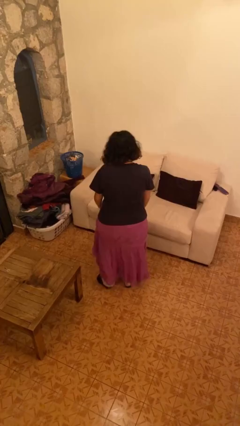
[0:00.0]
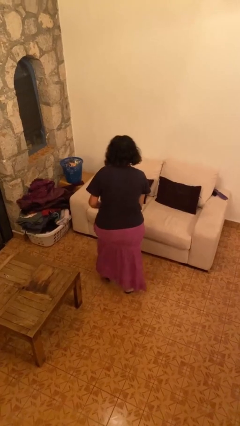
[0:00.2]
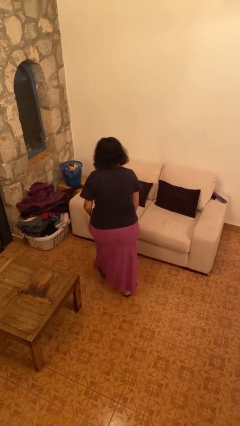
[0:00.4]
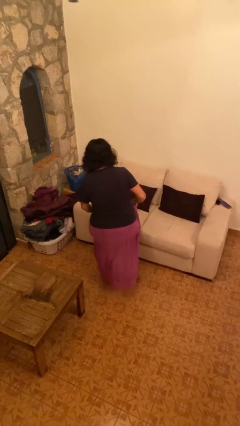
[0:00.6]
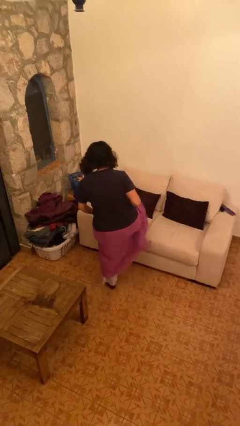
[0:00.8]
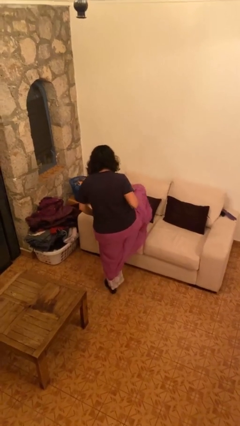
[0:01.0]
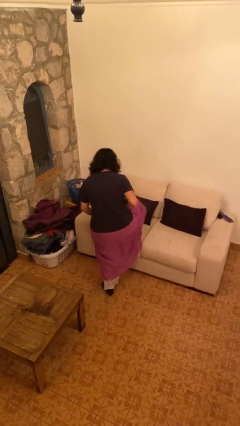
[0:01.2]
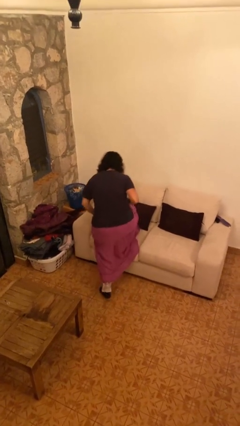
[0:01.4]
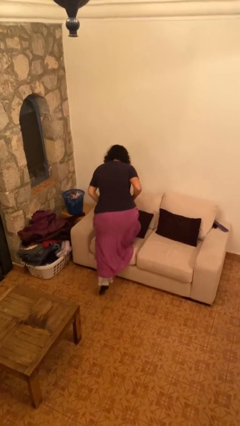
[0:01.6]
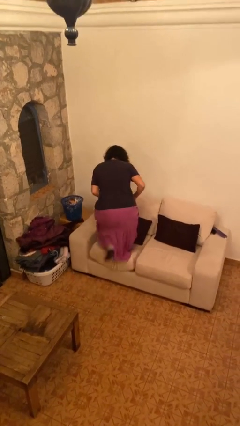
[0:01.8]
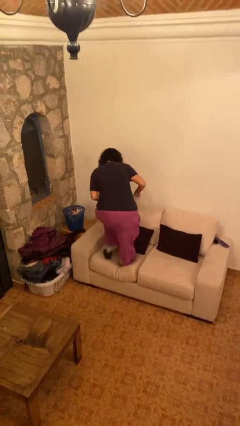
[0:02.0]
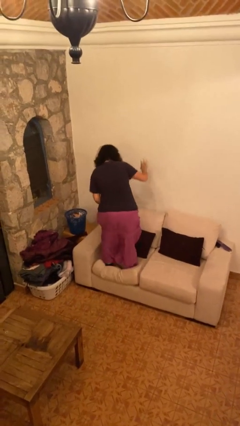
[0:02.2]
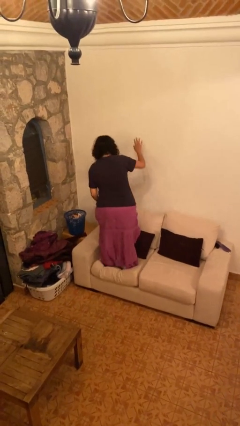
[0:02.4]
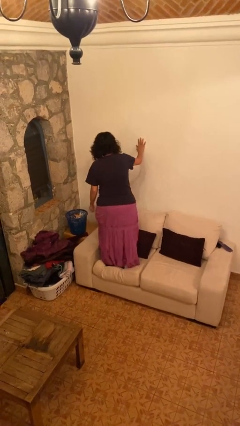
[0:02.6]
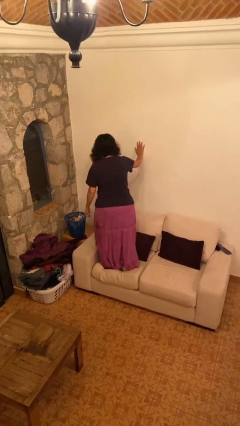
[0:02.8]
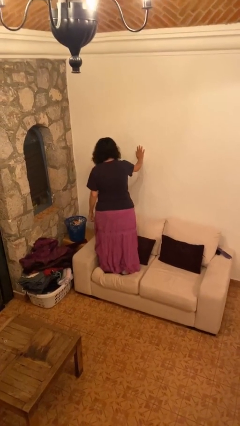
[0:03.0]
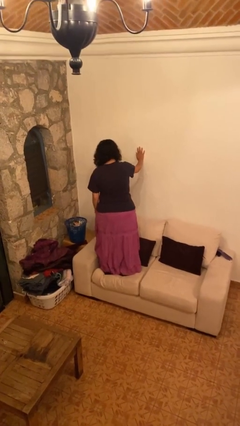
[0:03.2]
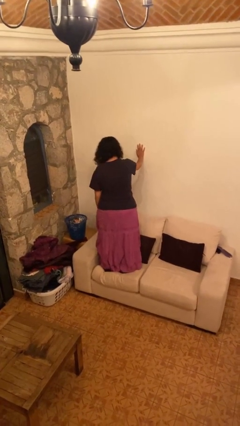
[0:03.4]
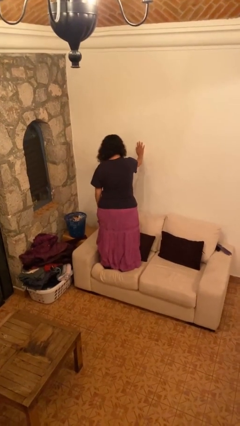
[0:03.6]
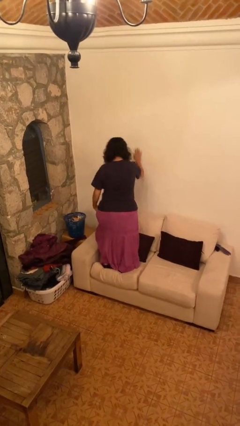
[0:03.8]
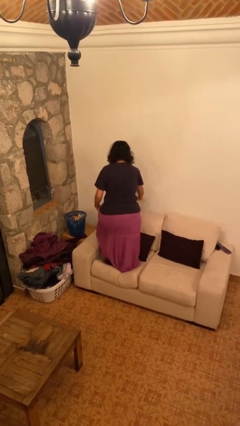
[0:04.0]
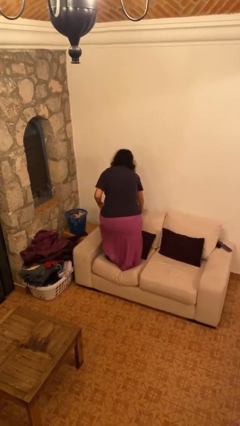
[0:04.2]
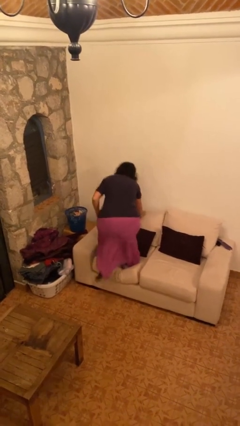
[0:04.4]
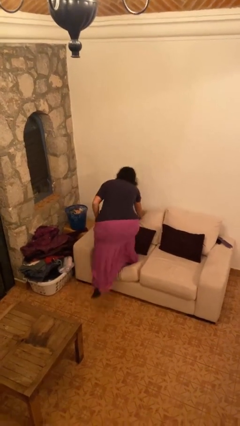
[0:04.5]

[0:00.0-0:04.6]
person climbs on couch

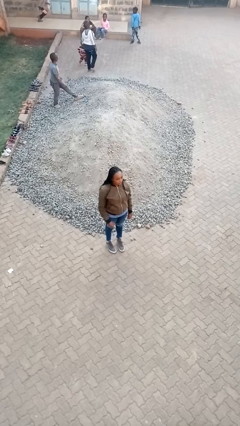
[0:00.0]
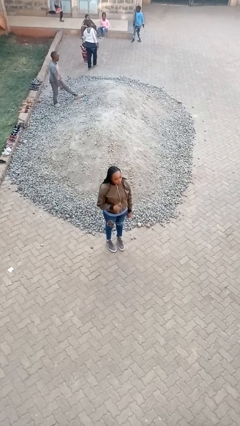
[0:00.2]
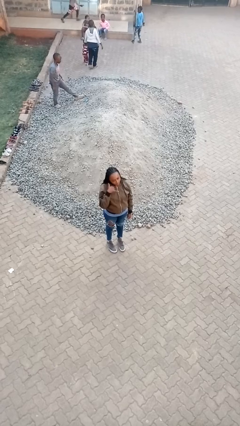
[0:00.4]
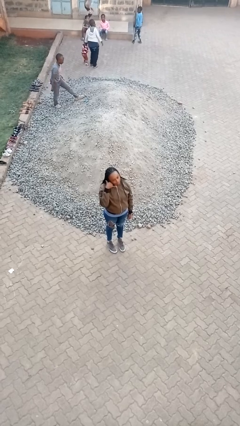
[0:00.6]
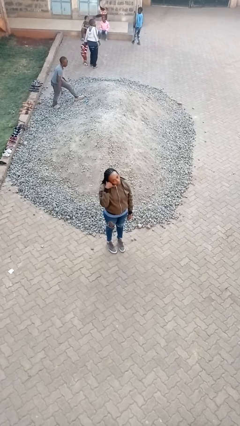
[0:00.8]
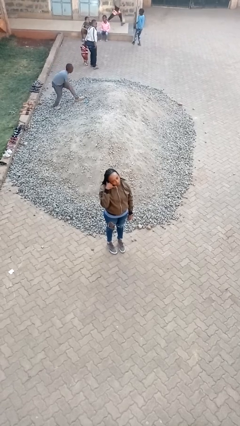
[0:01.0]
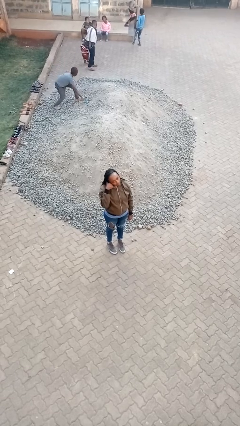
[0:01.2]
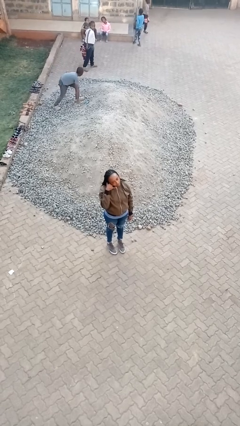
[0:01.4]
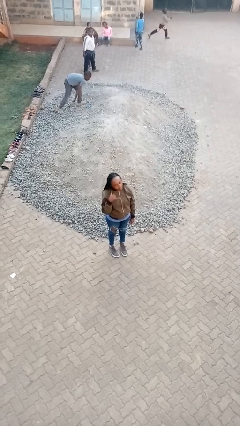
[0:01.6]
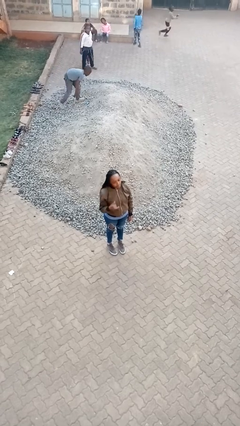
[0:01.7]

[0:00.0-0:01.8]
person gestures call me

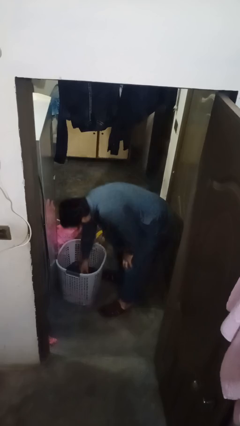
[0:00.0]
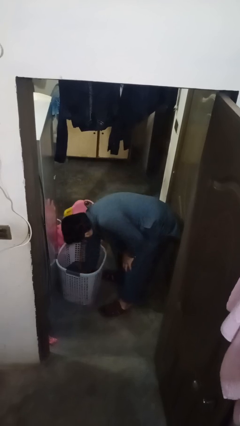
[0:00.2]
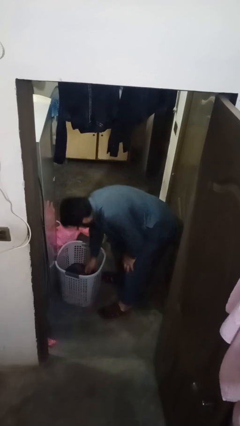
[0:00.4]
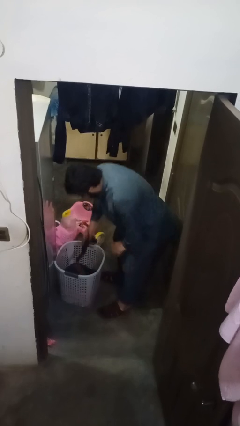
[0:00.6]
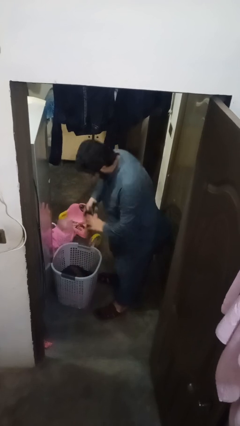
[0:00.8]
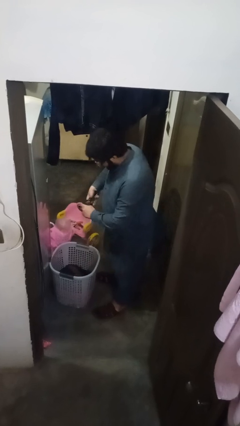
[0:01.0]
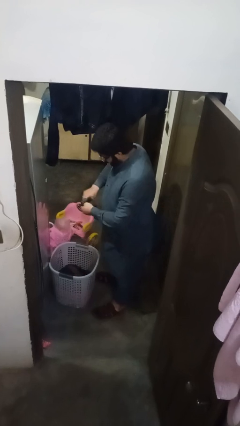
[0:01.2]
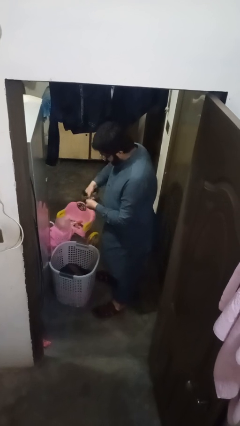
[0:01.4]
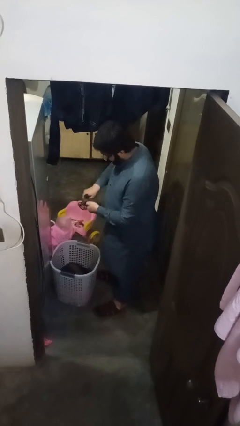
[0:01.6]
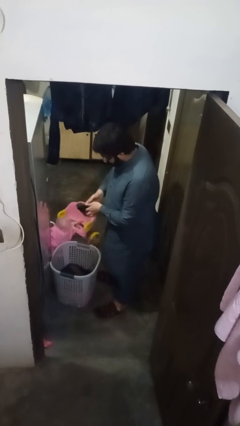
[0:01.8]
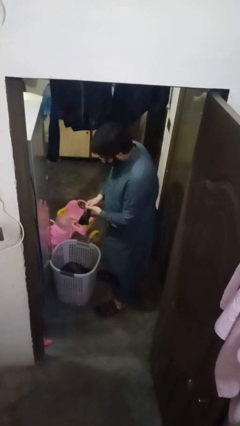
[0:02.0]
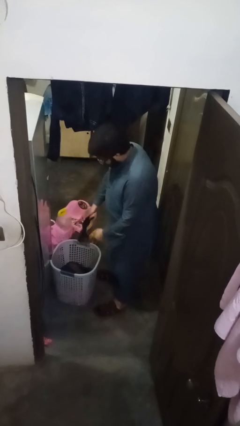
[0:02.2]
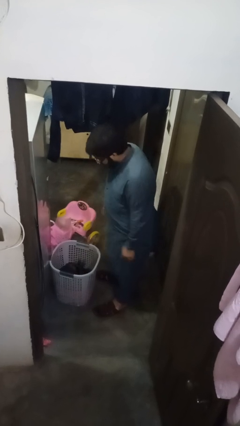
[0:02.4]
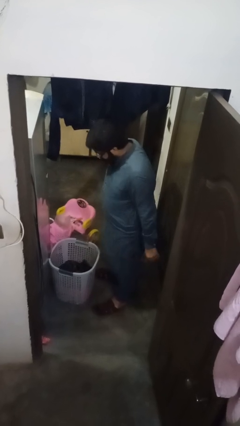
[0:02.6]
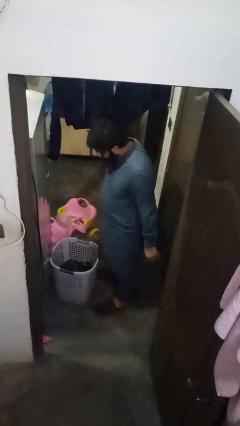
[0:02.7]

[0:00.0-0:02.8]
person folds socks

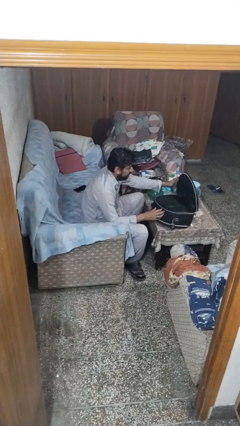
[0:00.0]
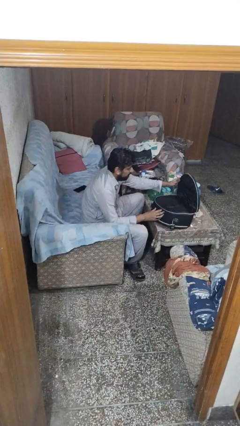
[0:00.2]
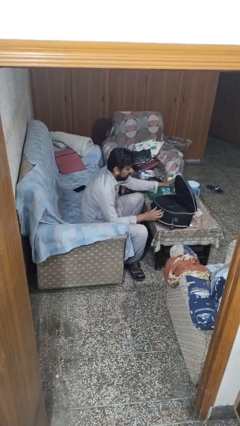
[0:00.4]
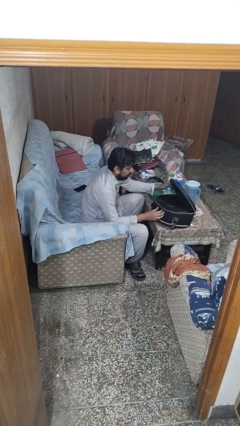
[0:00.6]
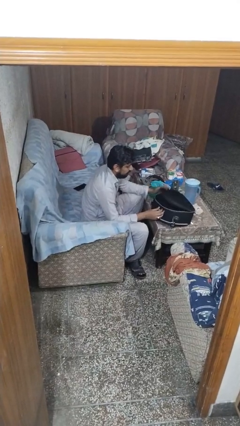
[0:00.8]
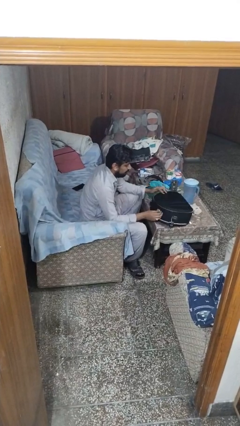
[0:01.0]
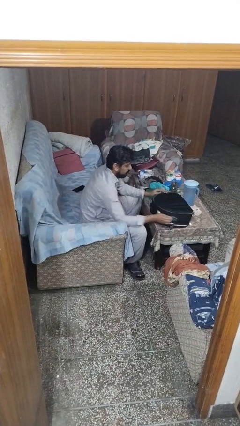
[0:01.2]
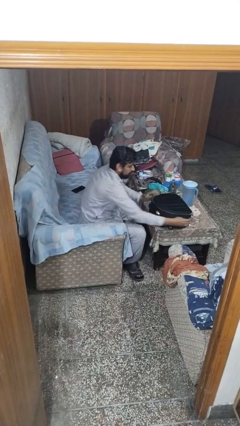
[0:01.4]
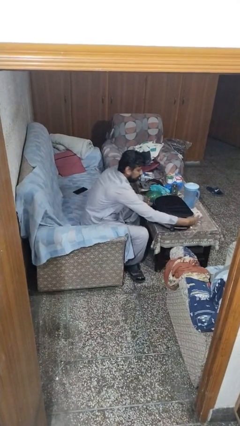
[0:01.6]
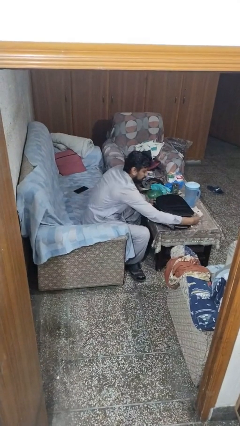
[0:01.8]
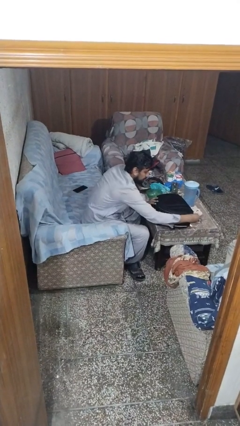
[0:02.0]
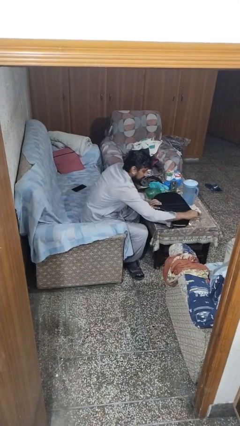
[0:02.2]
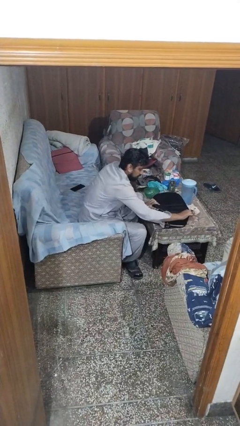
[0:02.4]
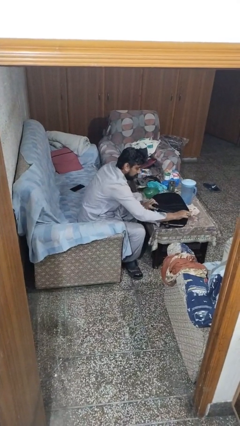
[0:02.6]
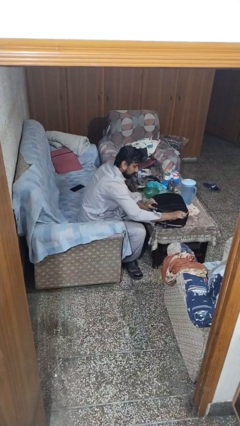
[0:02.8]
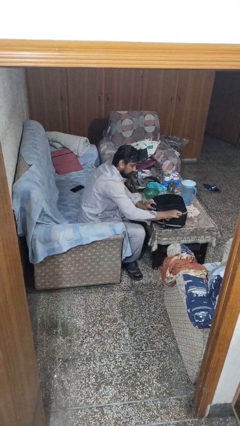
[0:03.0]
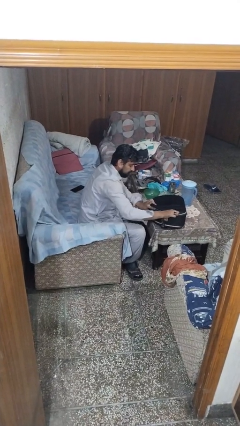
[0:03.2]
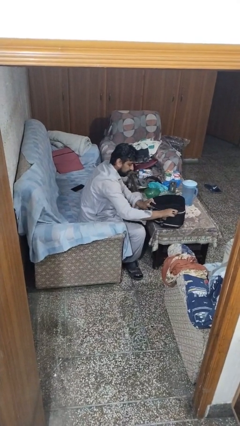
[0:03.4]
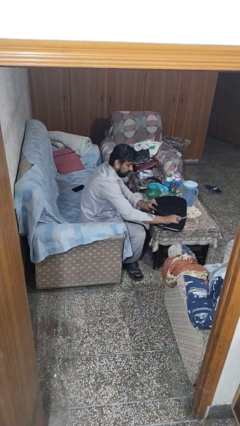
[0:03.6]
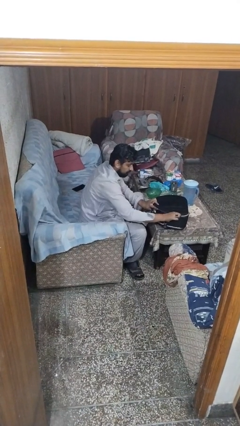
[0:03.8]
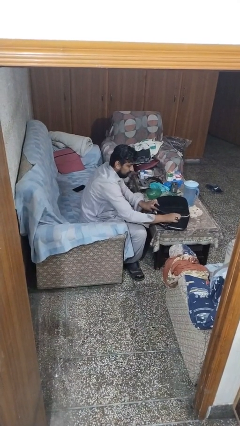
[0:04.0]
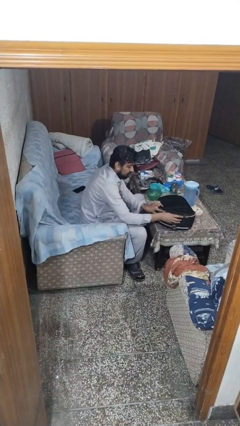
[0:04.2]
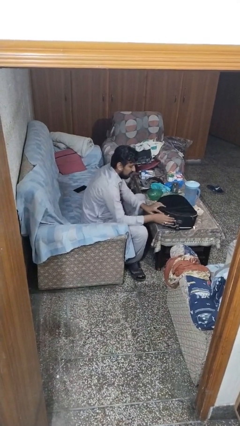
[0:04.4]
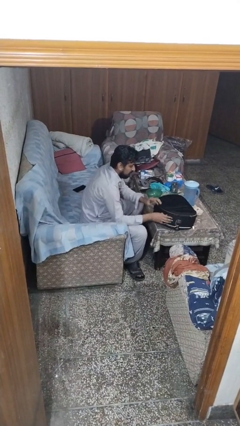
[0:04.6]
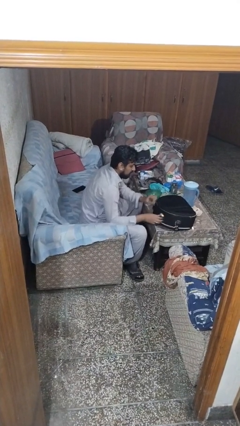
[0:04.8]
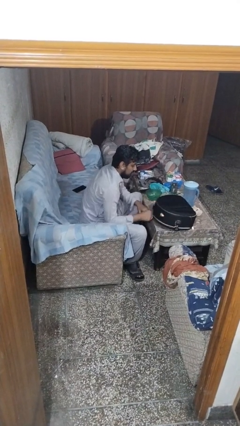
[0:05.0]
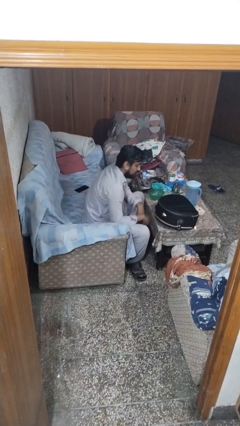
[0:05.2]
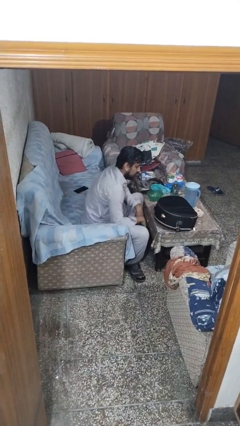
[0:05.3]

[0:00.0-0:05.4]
person closes suitcase

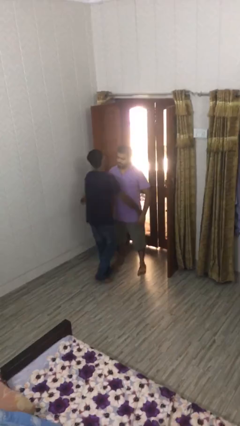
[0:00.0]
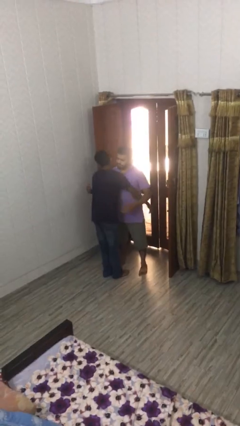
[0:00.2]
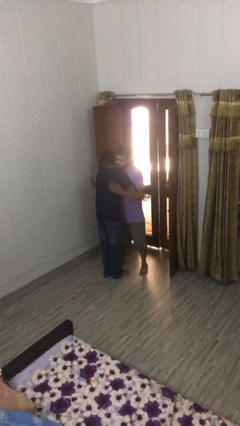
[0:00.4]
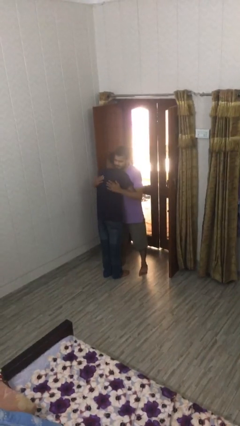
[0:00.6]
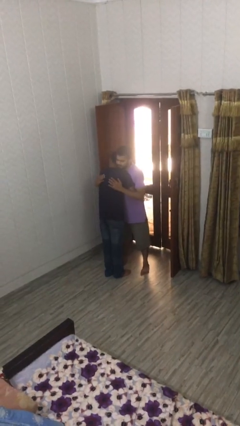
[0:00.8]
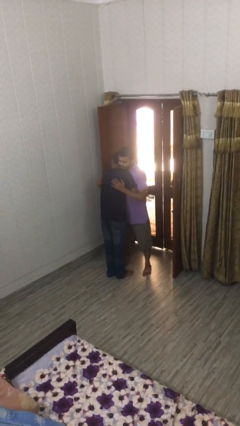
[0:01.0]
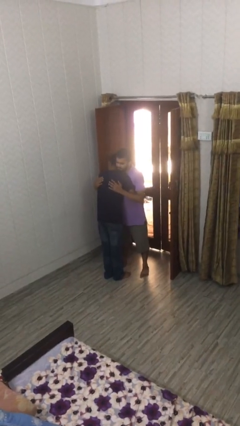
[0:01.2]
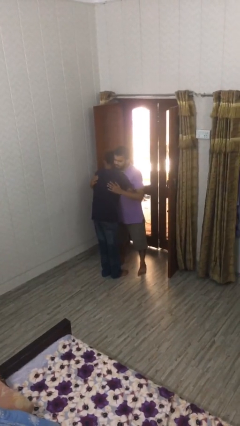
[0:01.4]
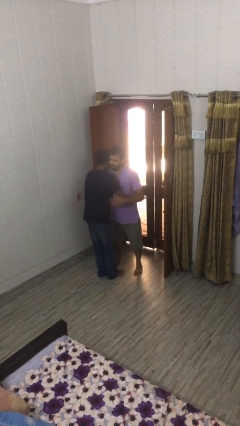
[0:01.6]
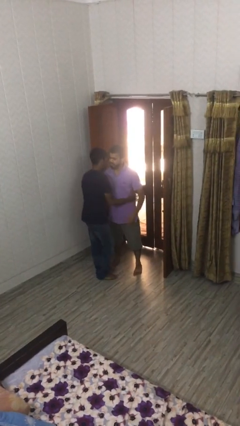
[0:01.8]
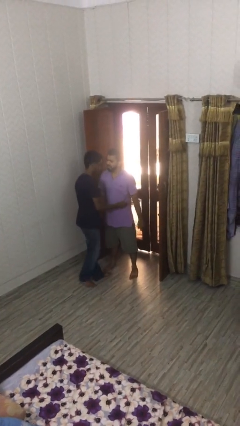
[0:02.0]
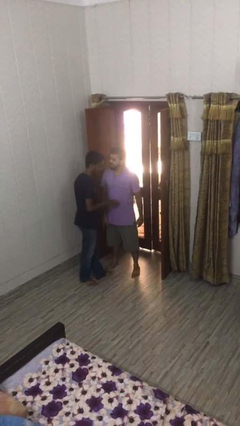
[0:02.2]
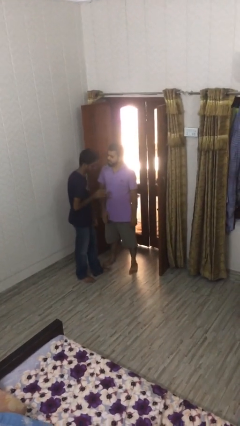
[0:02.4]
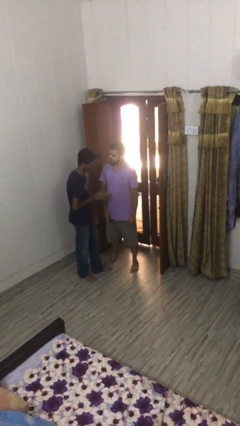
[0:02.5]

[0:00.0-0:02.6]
person embraces person

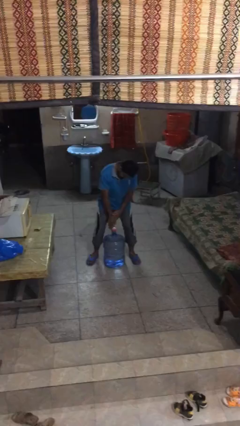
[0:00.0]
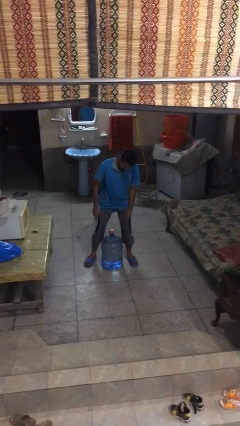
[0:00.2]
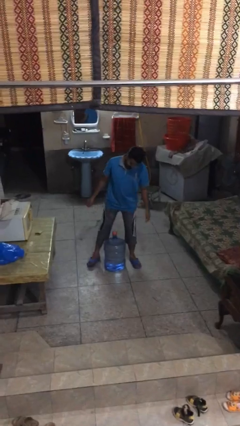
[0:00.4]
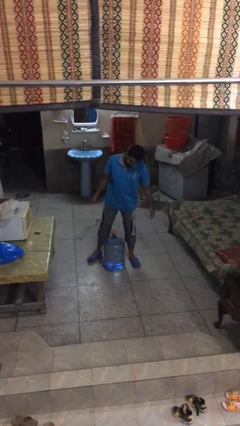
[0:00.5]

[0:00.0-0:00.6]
person puts down object on floor
